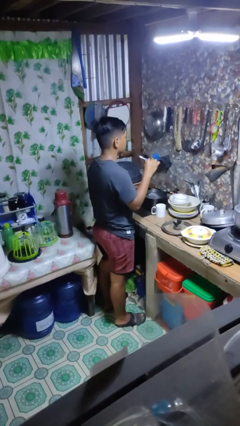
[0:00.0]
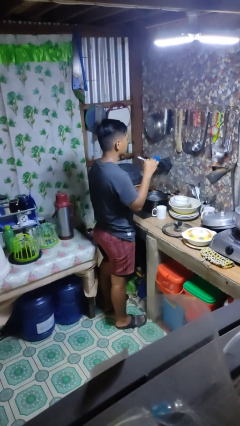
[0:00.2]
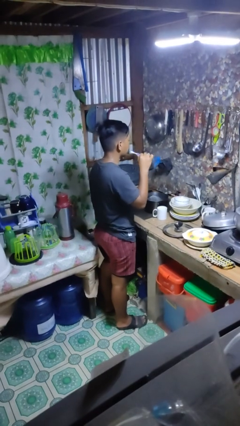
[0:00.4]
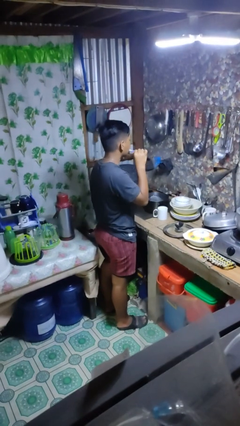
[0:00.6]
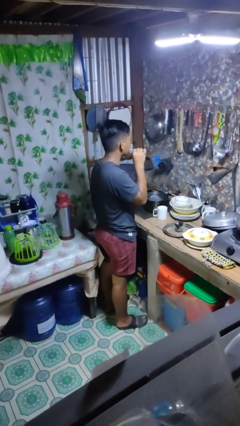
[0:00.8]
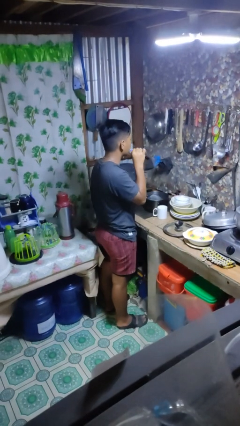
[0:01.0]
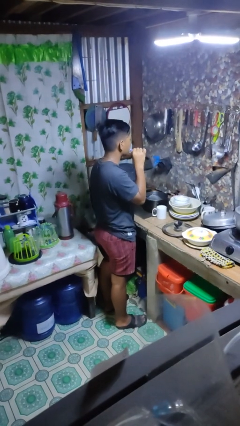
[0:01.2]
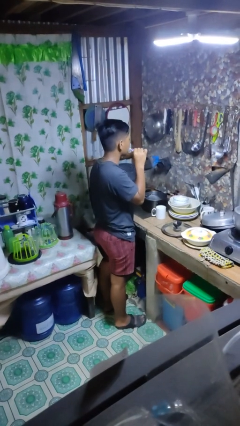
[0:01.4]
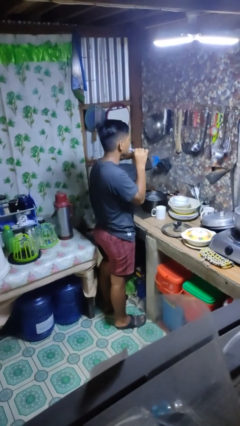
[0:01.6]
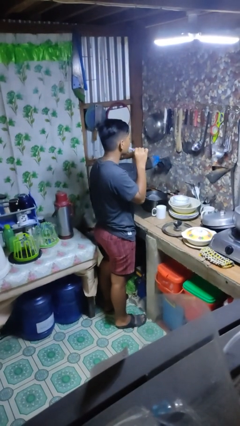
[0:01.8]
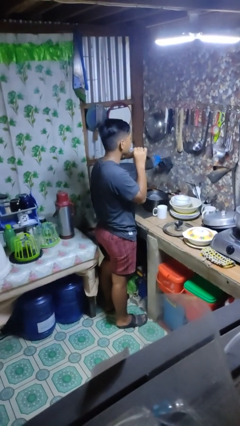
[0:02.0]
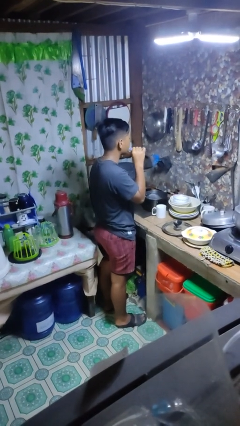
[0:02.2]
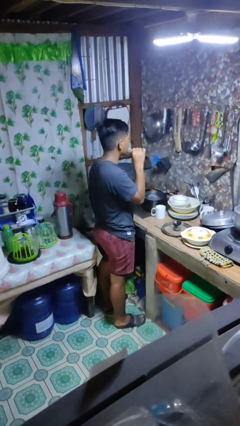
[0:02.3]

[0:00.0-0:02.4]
person brushes teeth

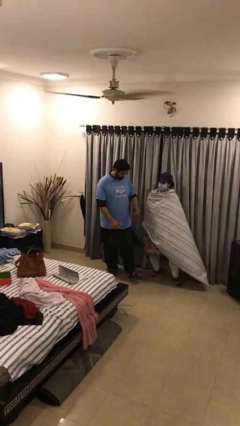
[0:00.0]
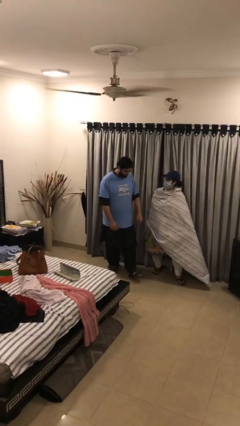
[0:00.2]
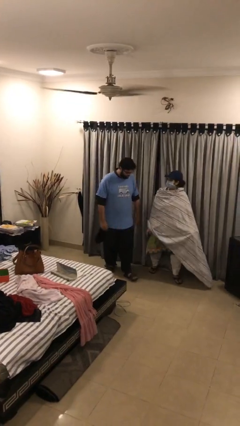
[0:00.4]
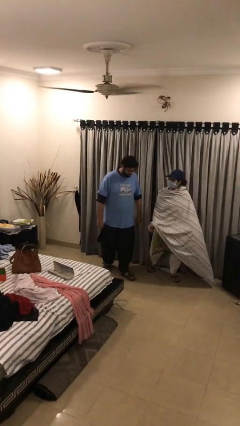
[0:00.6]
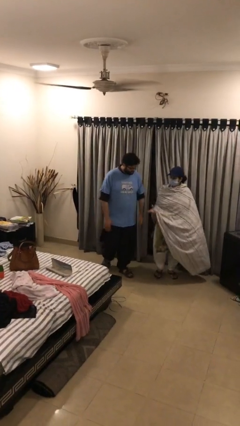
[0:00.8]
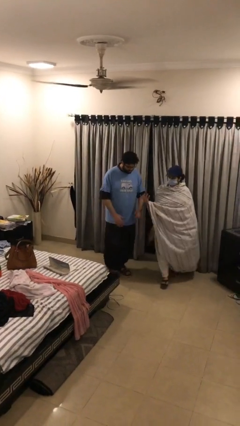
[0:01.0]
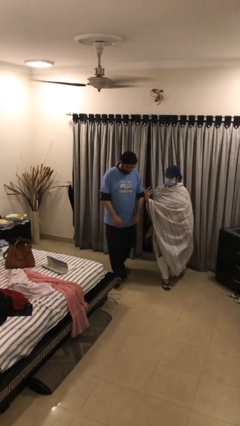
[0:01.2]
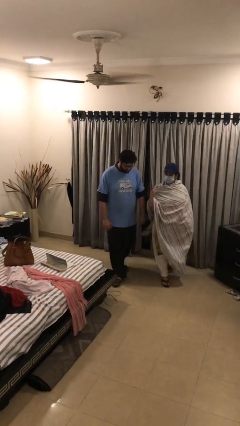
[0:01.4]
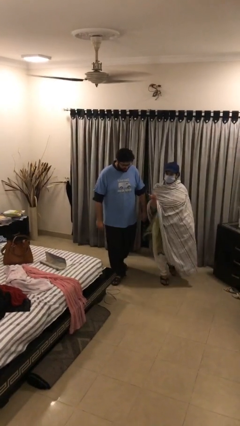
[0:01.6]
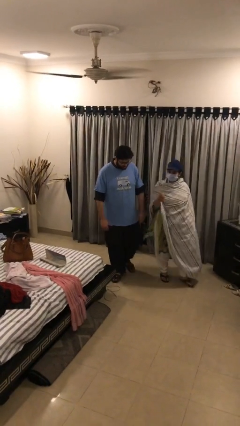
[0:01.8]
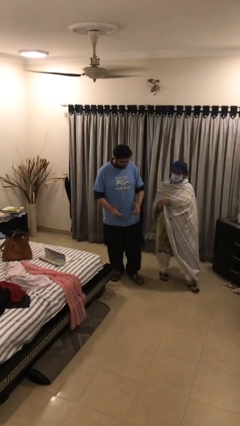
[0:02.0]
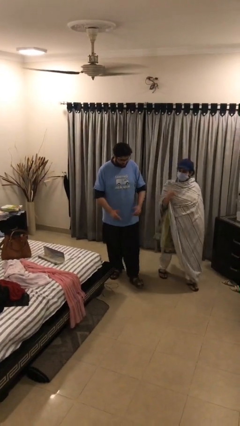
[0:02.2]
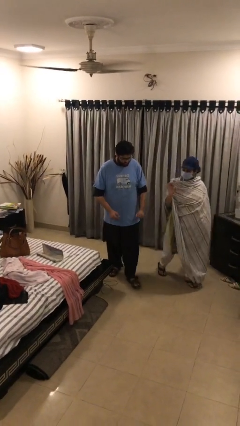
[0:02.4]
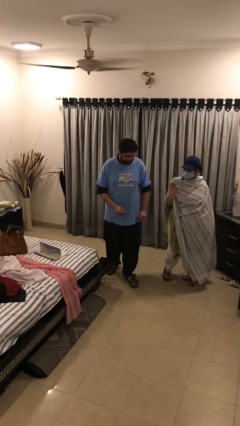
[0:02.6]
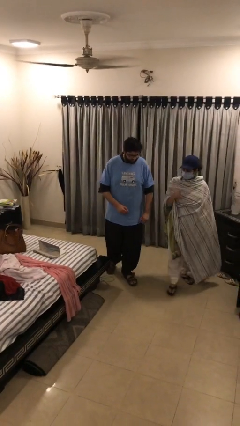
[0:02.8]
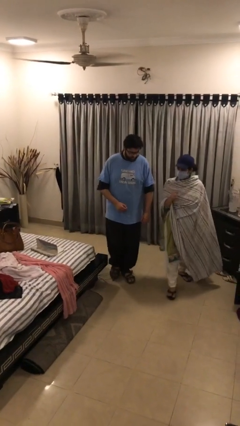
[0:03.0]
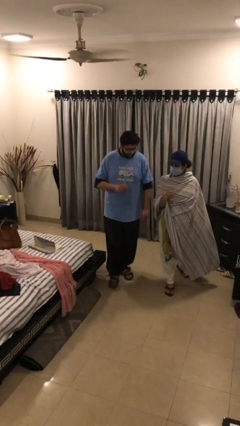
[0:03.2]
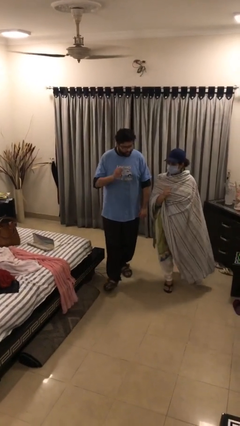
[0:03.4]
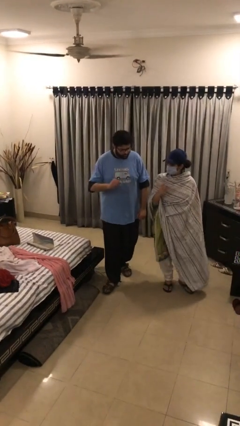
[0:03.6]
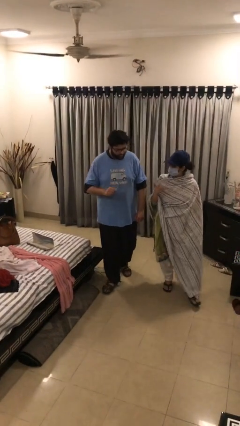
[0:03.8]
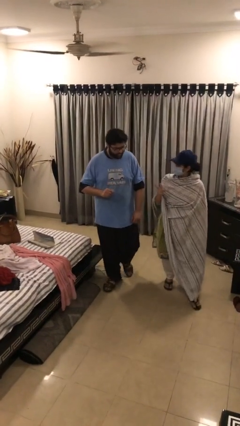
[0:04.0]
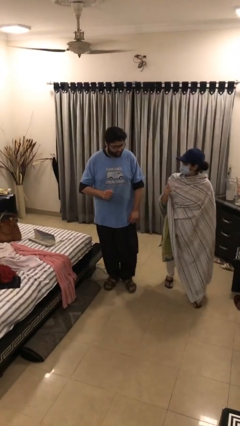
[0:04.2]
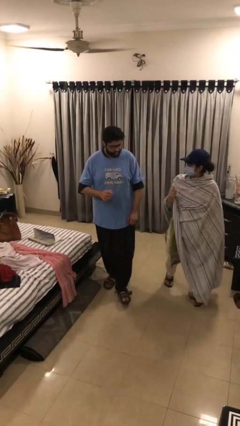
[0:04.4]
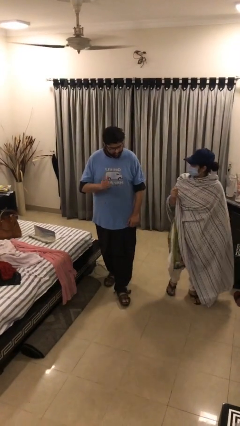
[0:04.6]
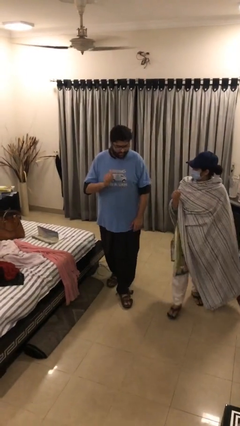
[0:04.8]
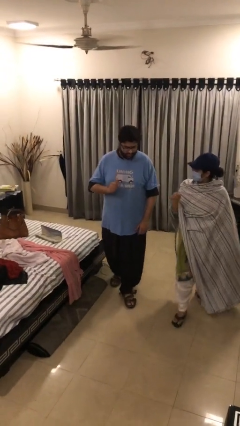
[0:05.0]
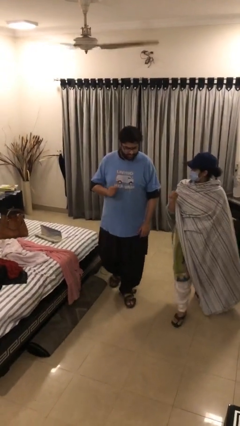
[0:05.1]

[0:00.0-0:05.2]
person talks to person

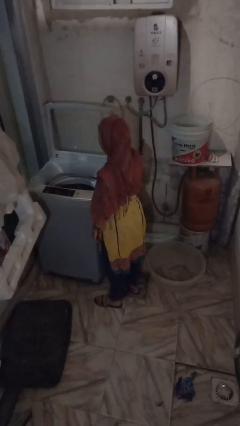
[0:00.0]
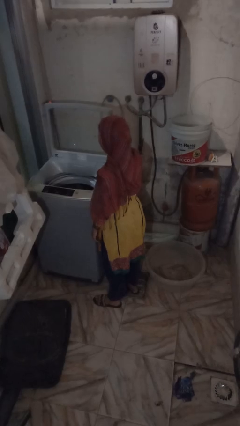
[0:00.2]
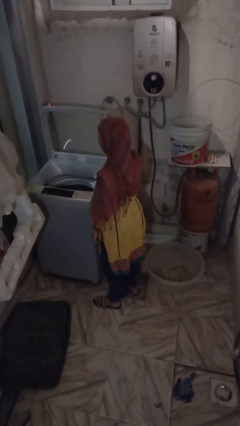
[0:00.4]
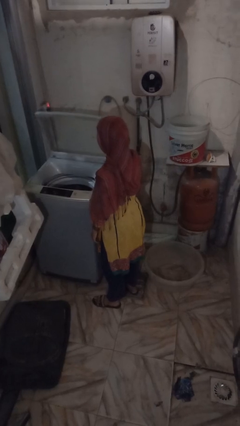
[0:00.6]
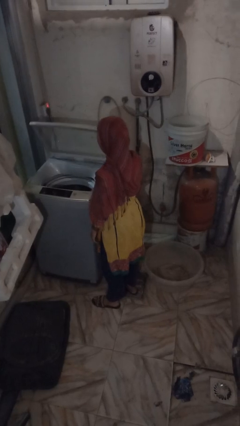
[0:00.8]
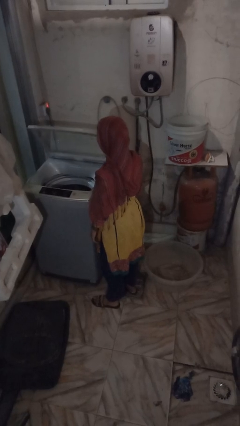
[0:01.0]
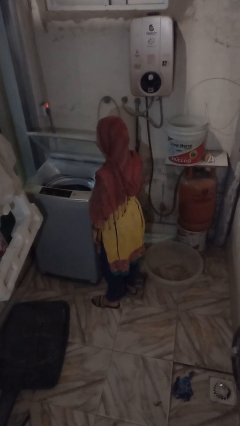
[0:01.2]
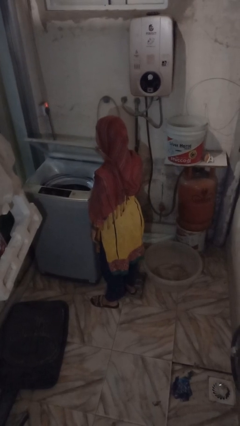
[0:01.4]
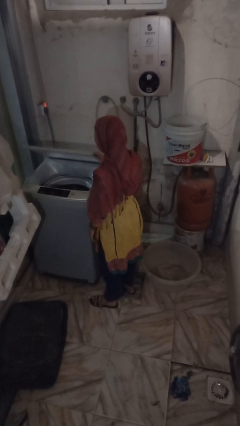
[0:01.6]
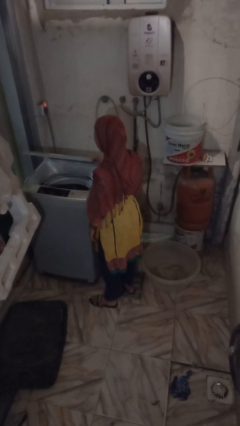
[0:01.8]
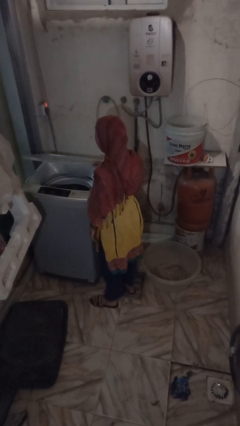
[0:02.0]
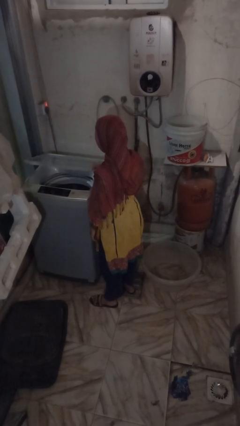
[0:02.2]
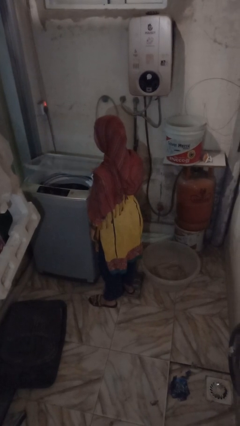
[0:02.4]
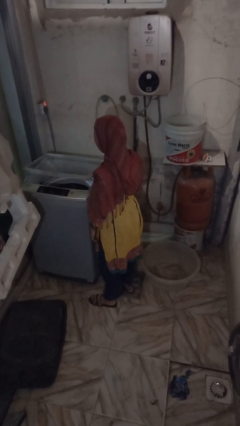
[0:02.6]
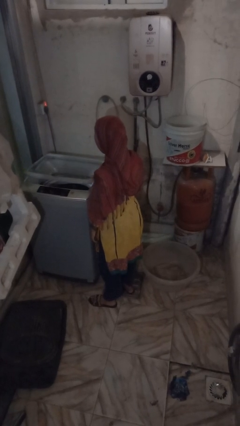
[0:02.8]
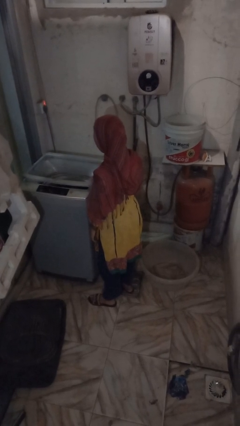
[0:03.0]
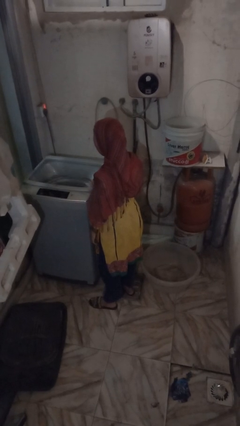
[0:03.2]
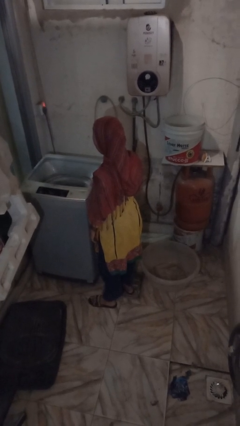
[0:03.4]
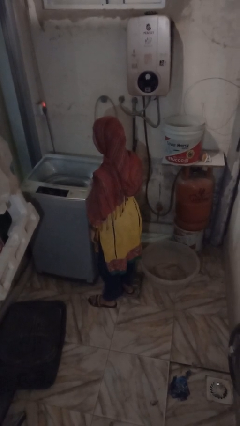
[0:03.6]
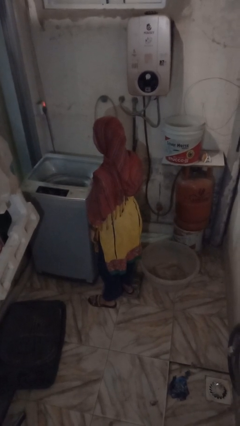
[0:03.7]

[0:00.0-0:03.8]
person closes clothes washer

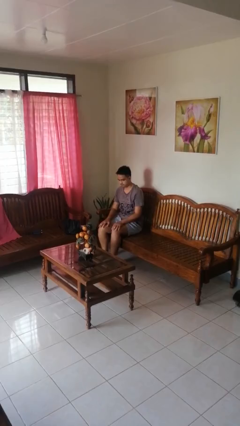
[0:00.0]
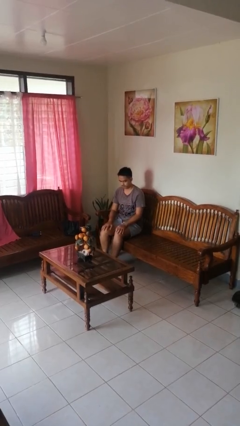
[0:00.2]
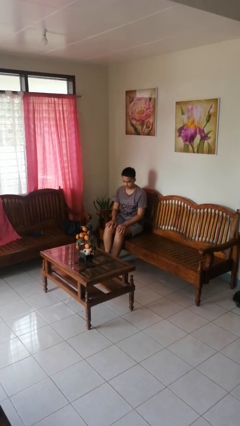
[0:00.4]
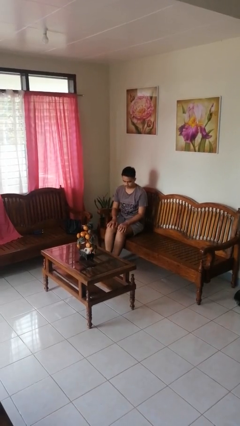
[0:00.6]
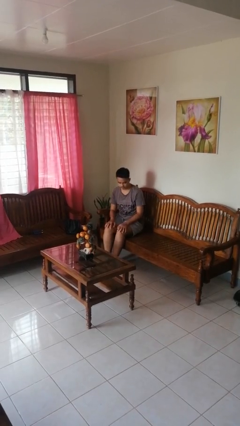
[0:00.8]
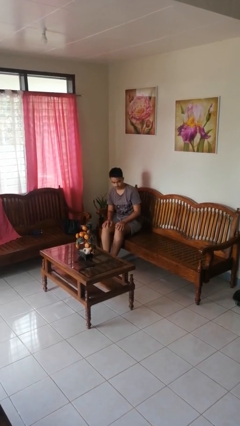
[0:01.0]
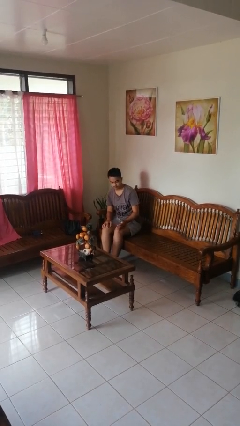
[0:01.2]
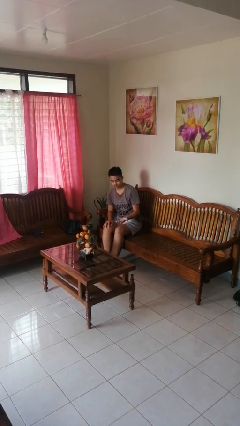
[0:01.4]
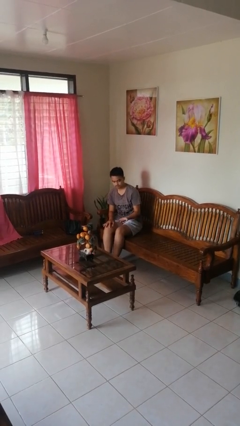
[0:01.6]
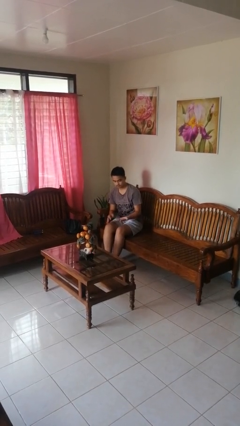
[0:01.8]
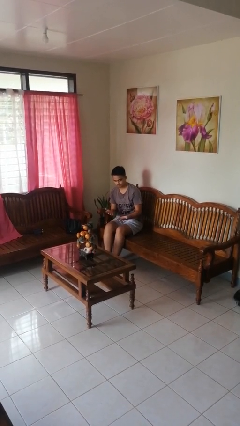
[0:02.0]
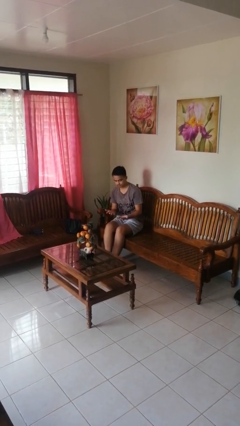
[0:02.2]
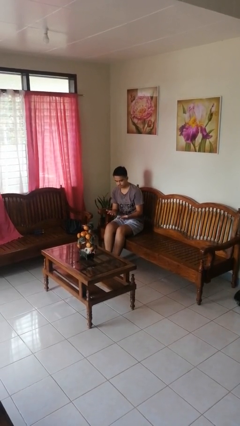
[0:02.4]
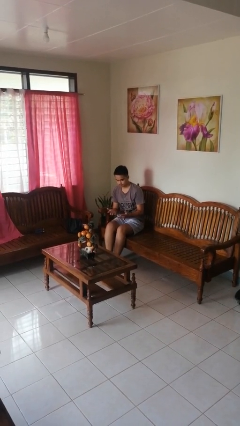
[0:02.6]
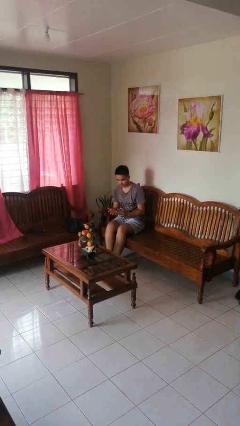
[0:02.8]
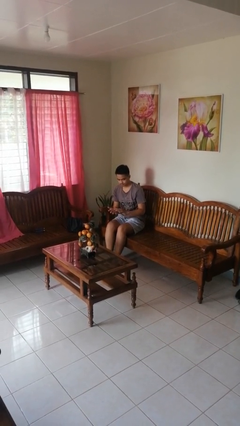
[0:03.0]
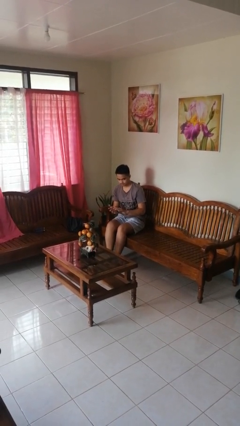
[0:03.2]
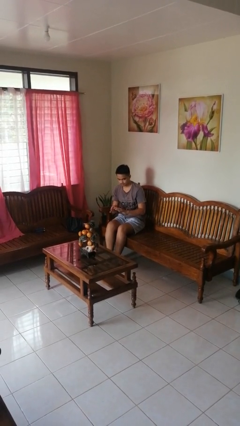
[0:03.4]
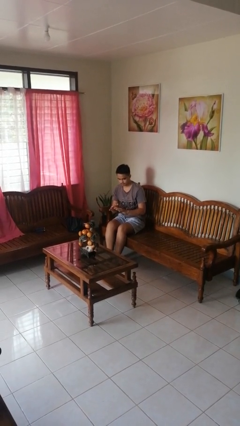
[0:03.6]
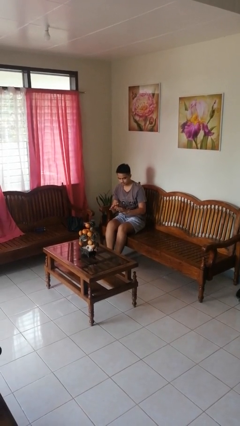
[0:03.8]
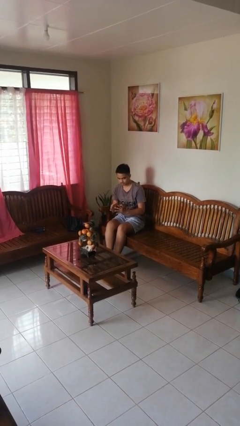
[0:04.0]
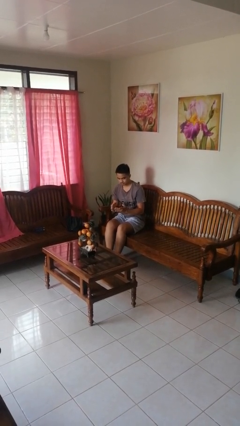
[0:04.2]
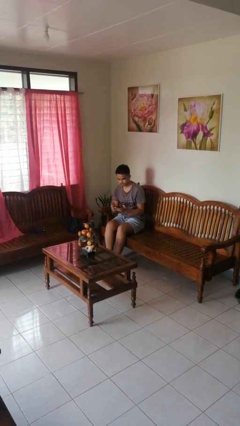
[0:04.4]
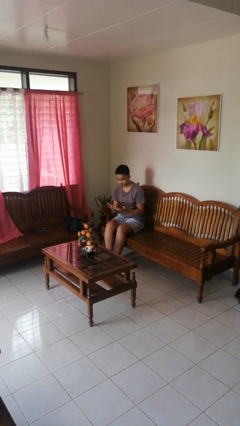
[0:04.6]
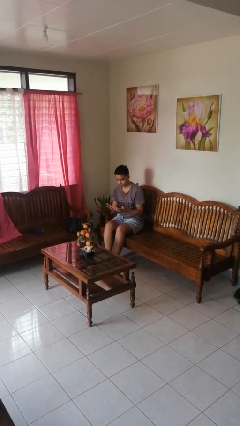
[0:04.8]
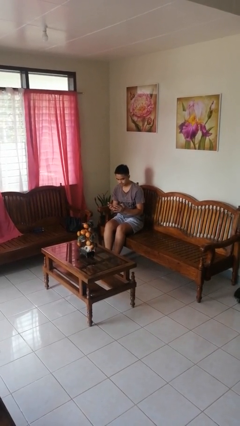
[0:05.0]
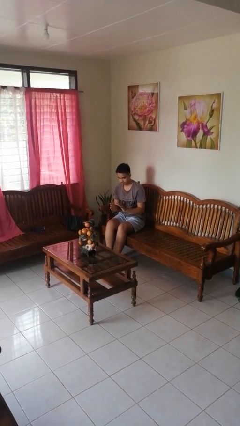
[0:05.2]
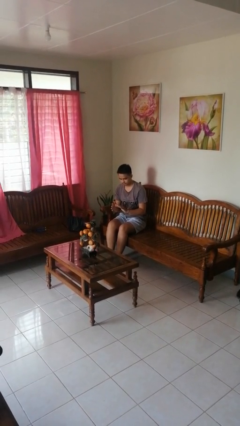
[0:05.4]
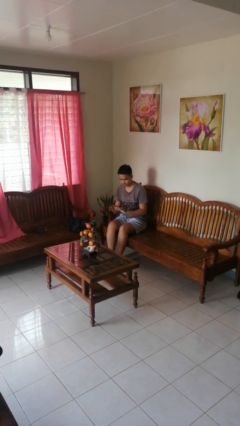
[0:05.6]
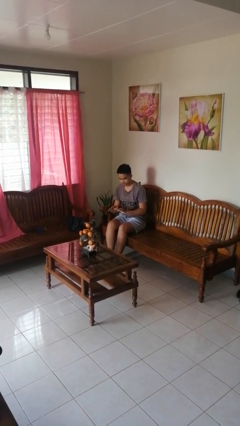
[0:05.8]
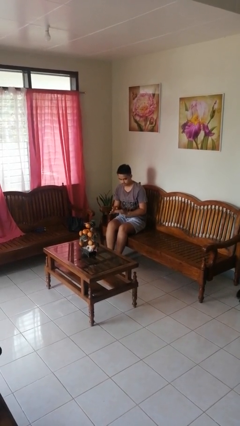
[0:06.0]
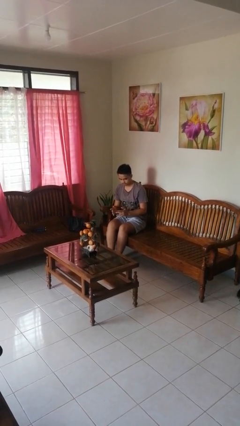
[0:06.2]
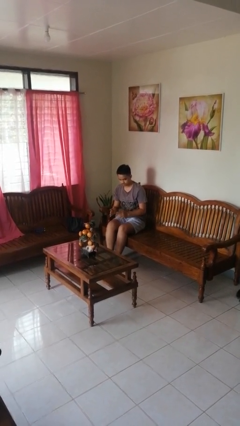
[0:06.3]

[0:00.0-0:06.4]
person looks at hands in lap
